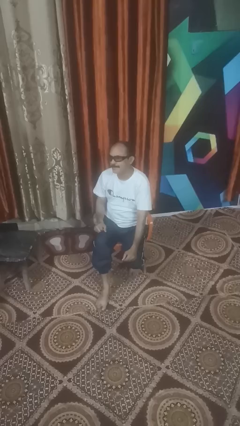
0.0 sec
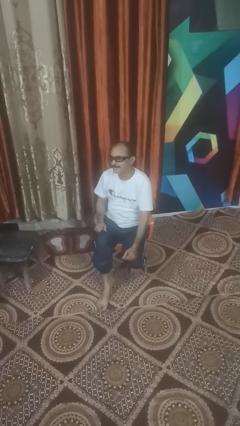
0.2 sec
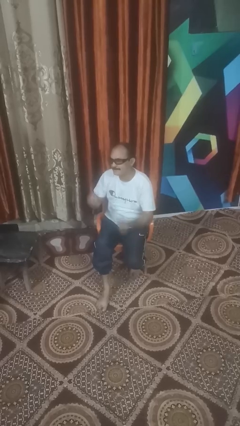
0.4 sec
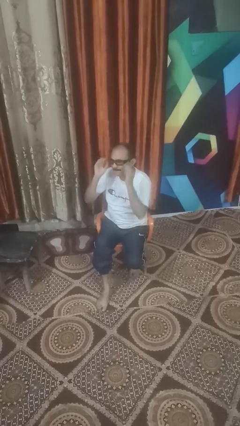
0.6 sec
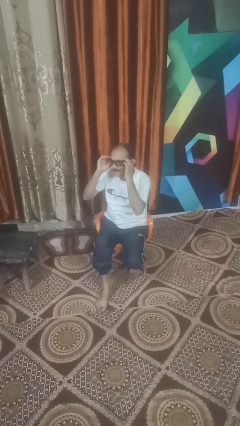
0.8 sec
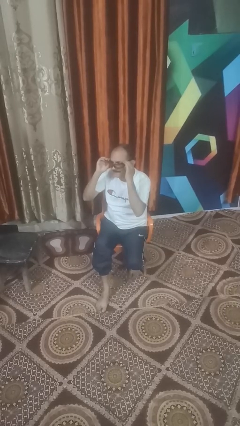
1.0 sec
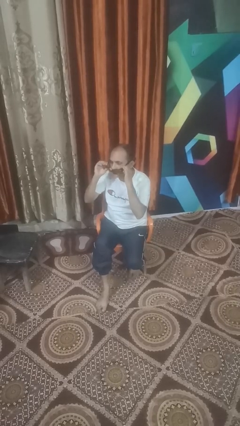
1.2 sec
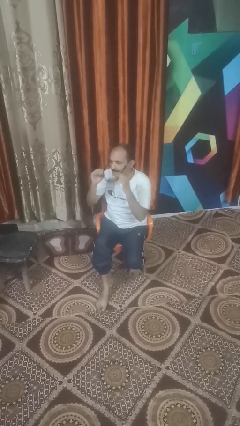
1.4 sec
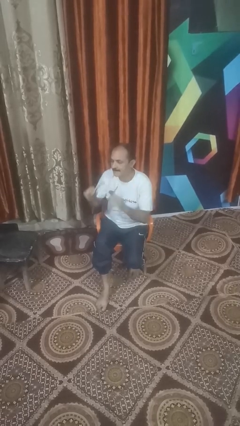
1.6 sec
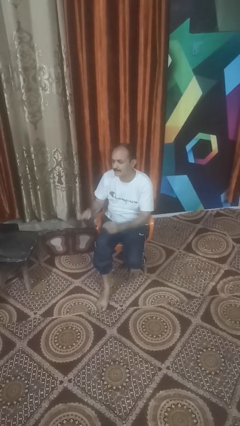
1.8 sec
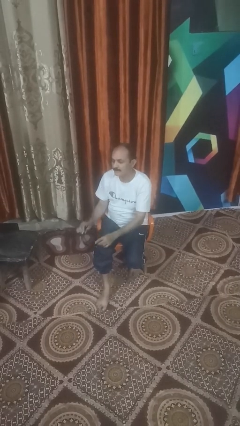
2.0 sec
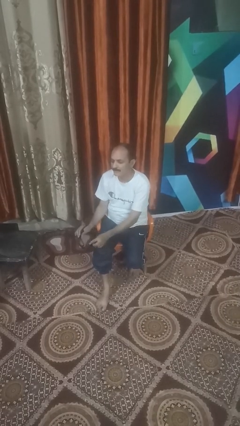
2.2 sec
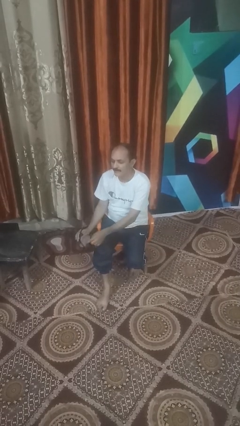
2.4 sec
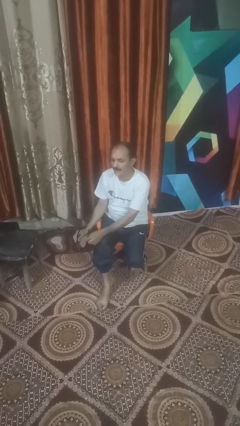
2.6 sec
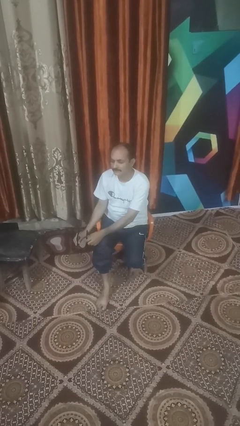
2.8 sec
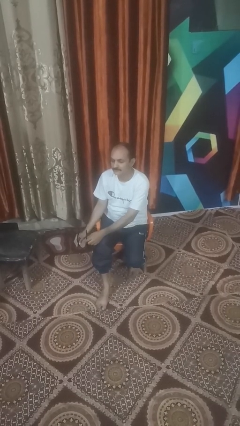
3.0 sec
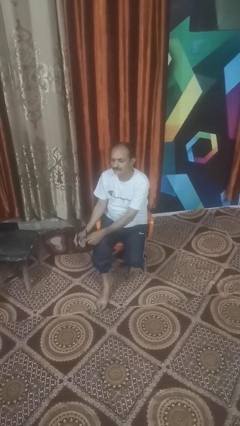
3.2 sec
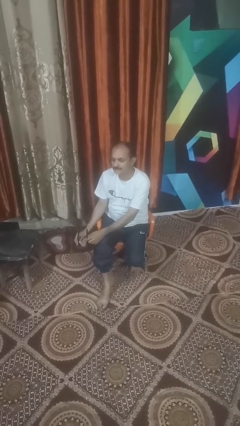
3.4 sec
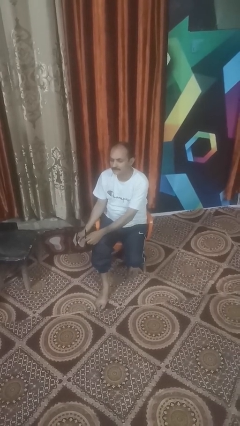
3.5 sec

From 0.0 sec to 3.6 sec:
person takes off sunglasses

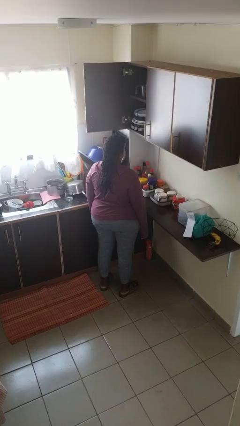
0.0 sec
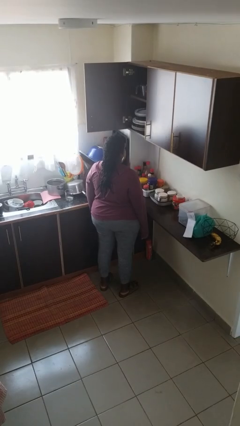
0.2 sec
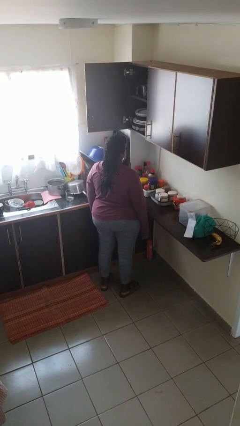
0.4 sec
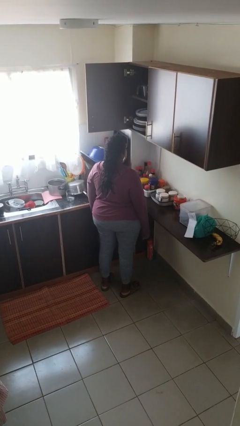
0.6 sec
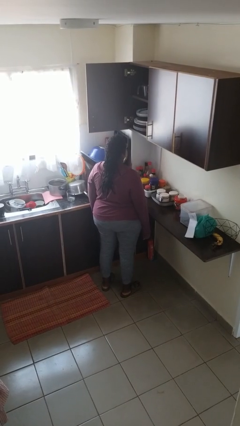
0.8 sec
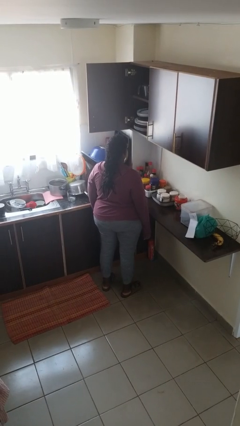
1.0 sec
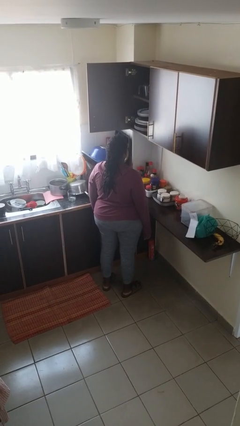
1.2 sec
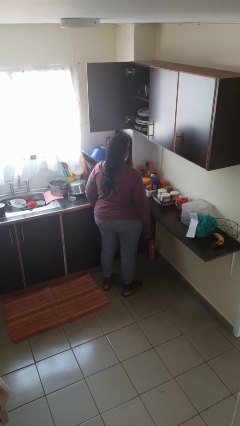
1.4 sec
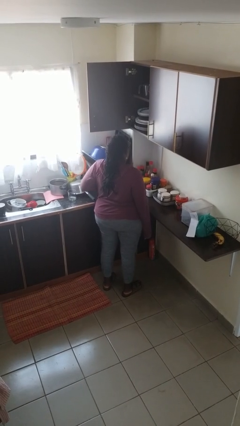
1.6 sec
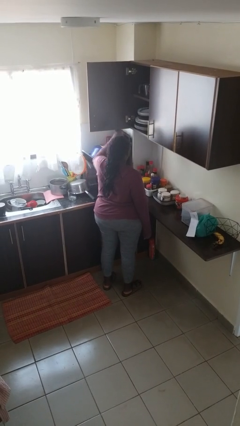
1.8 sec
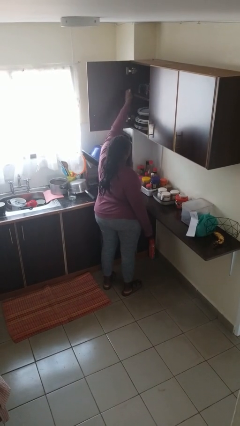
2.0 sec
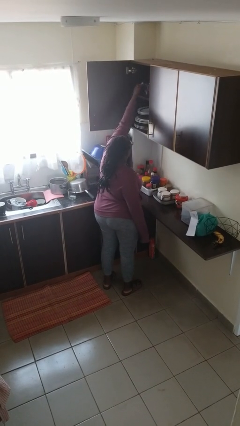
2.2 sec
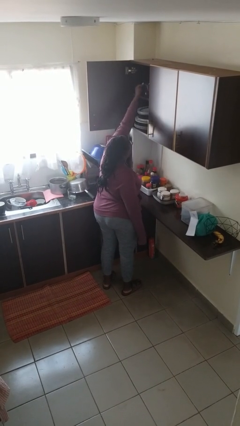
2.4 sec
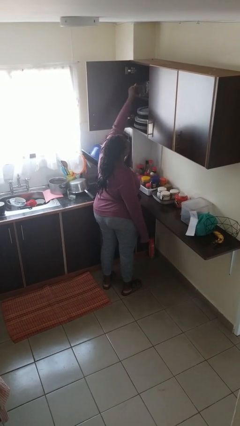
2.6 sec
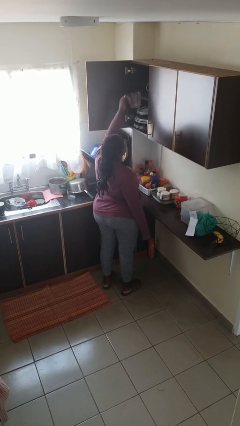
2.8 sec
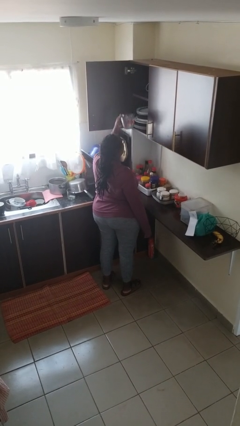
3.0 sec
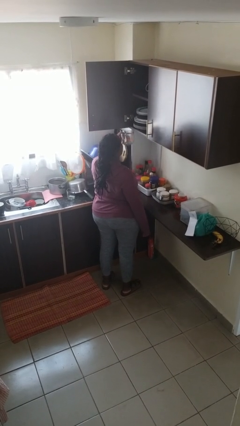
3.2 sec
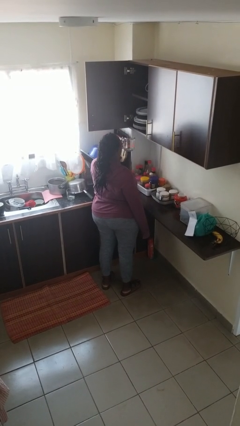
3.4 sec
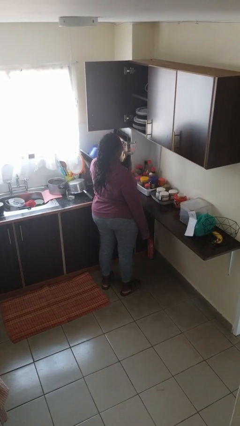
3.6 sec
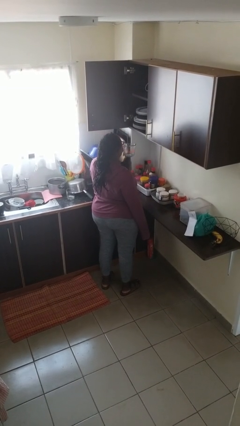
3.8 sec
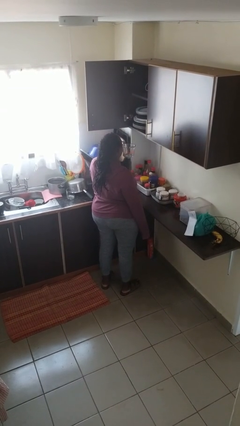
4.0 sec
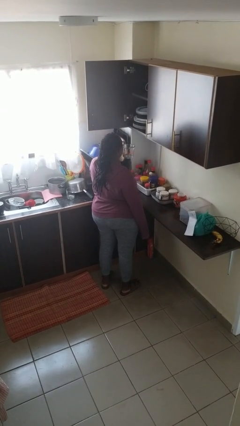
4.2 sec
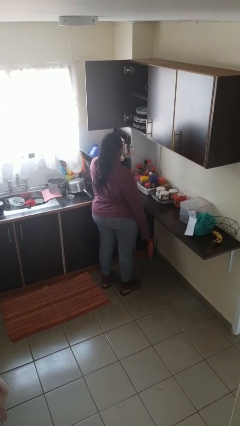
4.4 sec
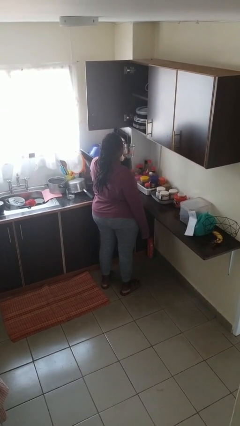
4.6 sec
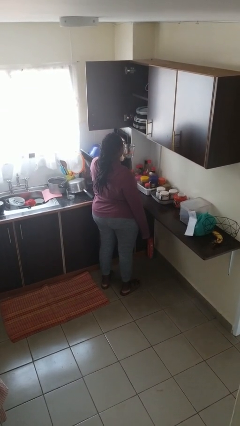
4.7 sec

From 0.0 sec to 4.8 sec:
person picks up object from cabinet

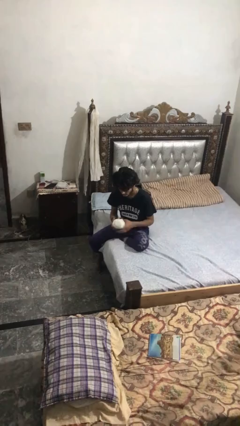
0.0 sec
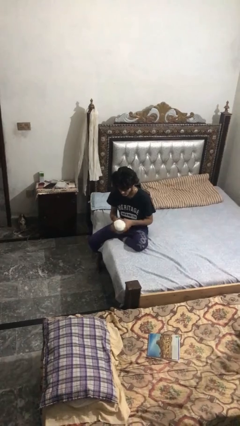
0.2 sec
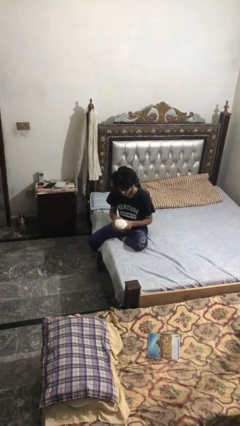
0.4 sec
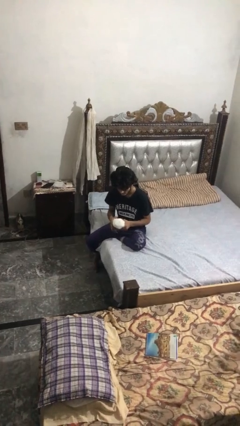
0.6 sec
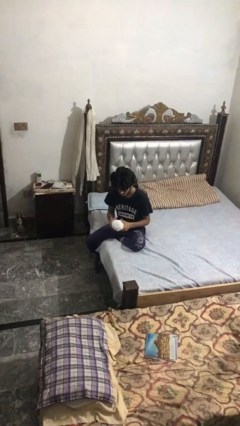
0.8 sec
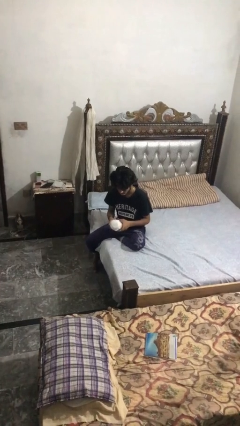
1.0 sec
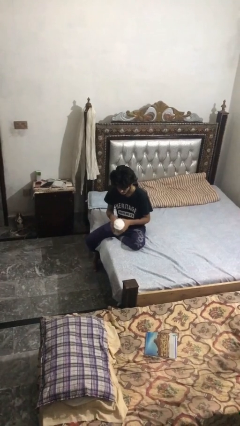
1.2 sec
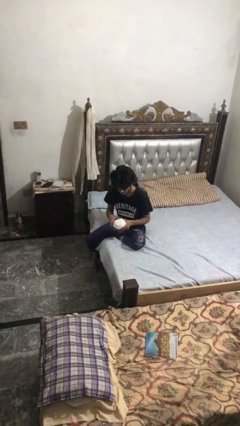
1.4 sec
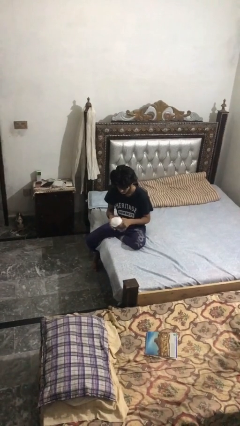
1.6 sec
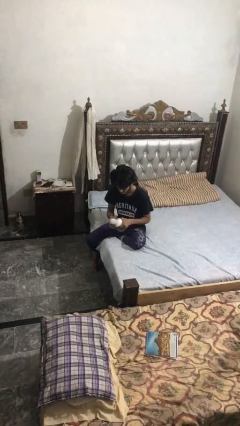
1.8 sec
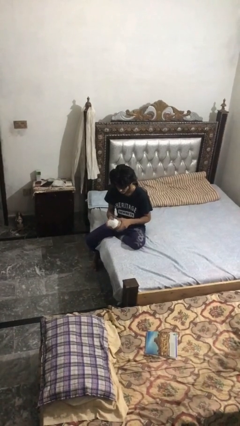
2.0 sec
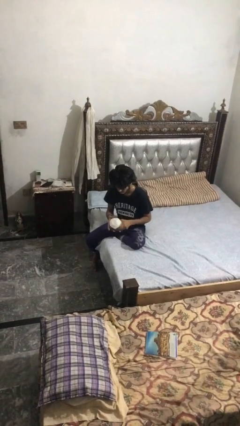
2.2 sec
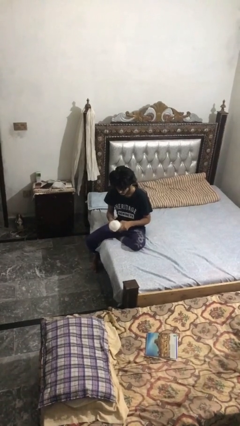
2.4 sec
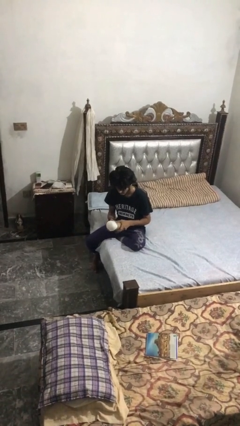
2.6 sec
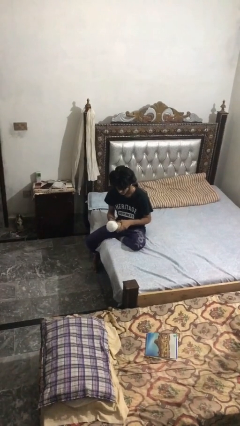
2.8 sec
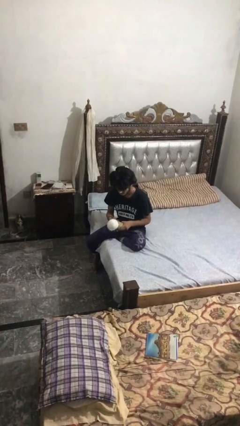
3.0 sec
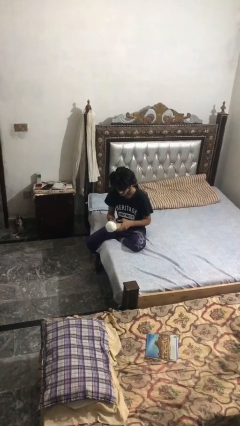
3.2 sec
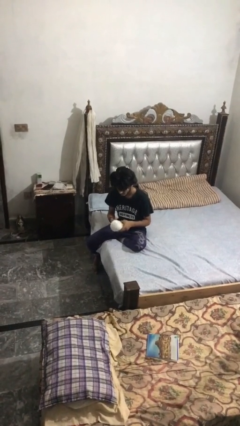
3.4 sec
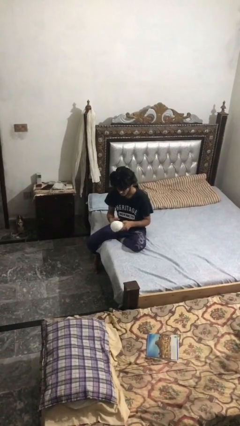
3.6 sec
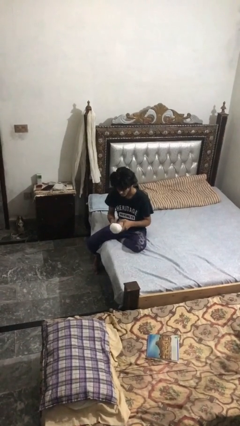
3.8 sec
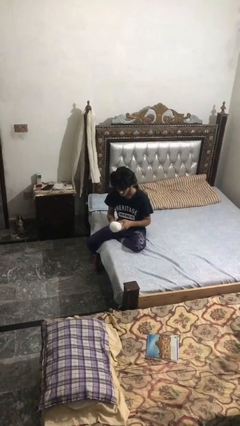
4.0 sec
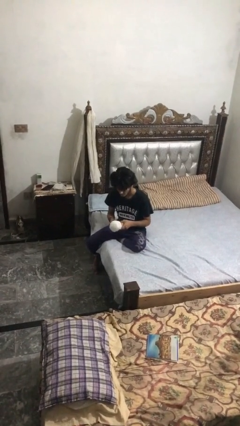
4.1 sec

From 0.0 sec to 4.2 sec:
person squeezes object

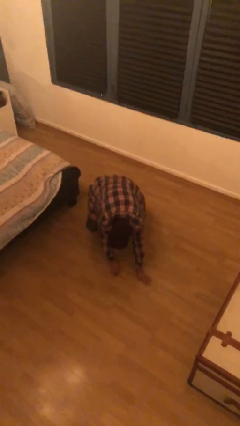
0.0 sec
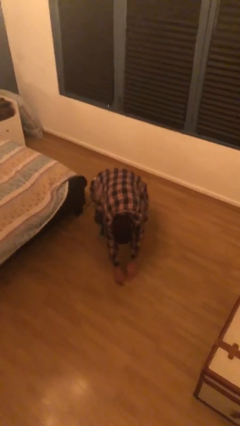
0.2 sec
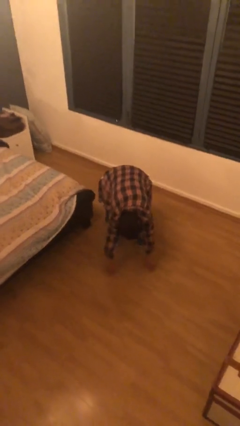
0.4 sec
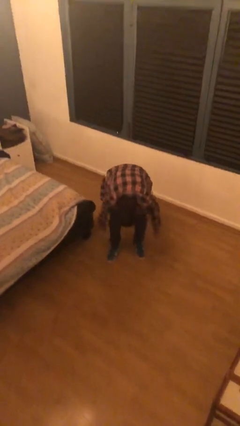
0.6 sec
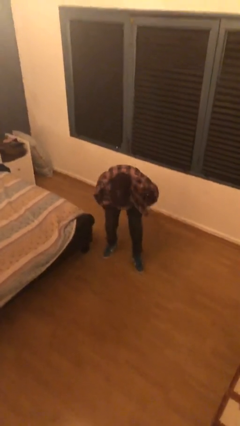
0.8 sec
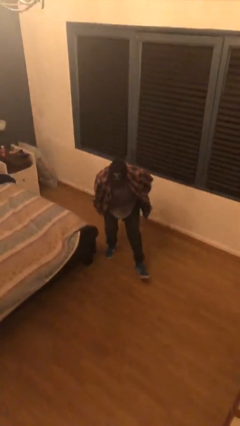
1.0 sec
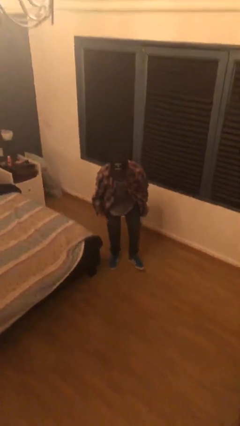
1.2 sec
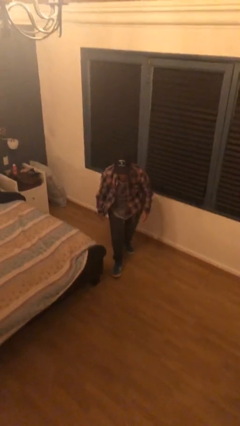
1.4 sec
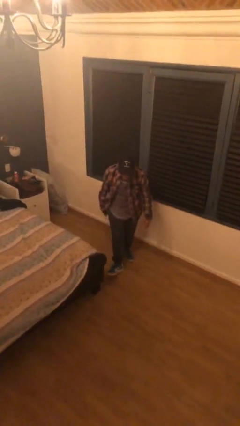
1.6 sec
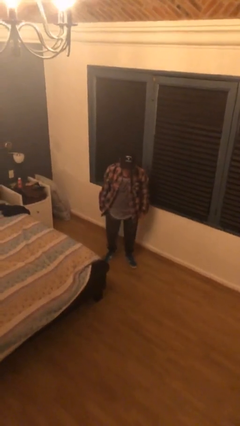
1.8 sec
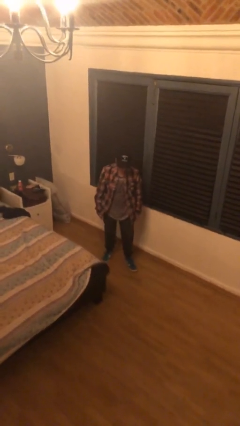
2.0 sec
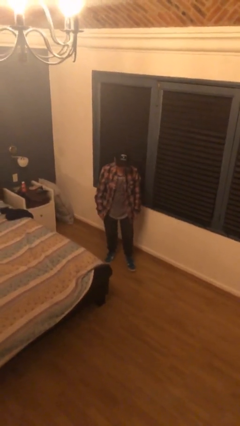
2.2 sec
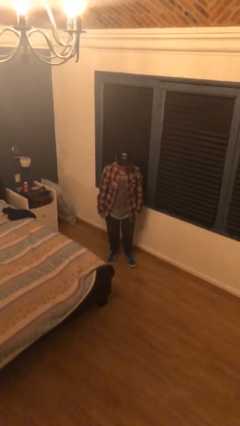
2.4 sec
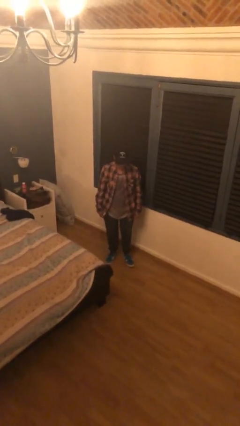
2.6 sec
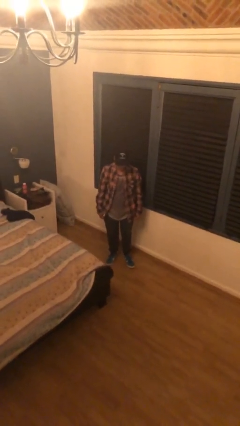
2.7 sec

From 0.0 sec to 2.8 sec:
person stands up from floor

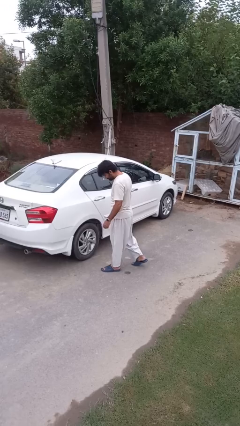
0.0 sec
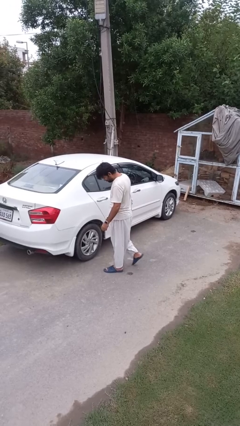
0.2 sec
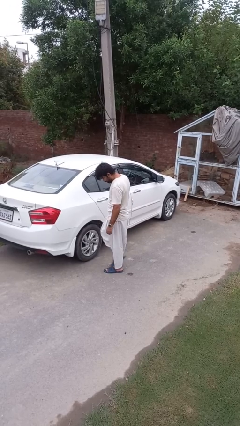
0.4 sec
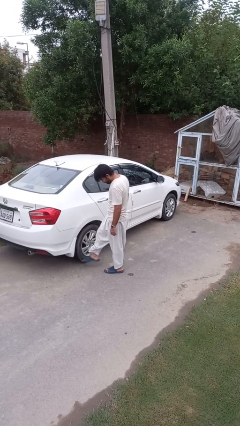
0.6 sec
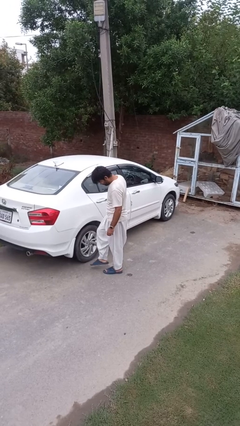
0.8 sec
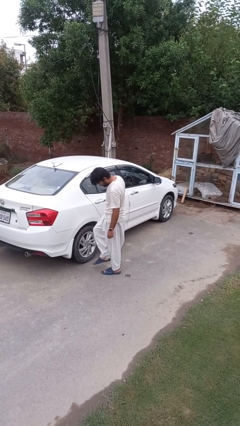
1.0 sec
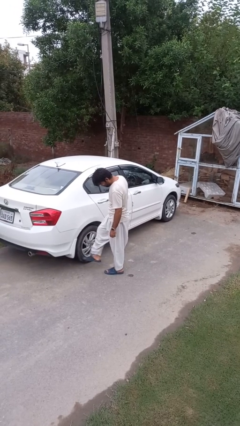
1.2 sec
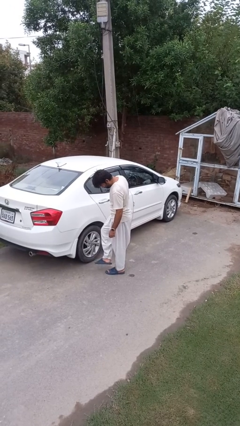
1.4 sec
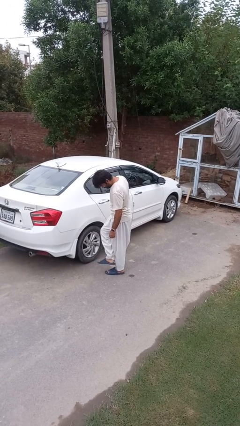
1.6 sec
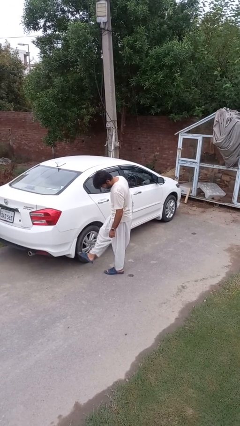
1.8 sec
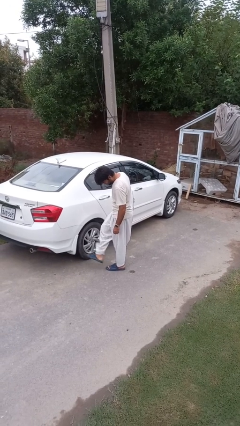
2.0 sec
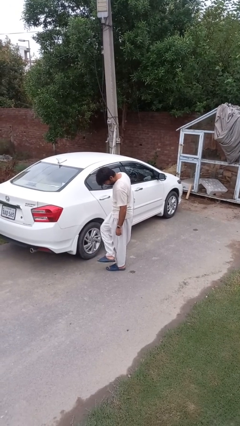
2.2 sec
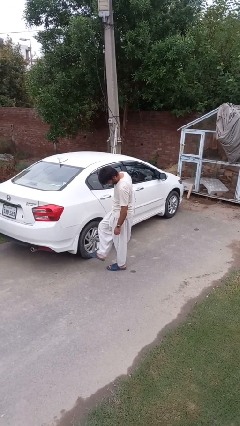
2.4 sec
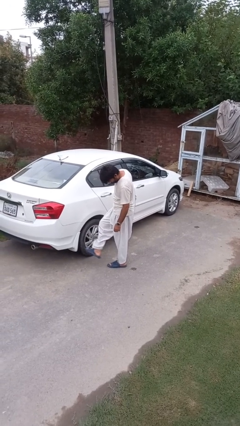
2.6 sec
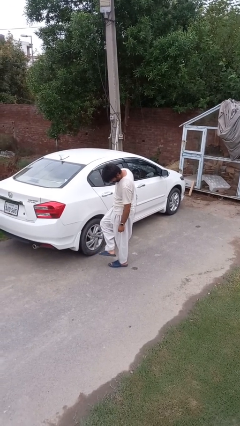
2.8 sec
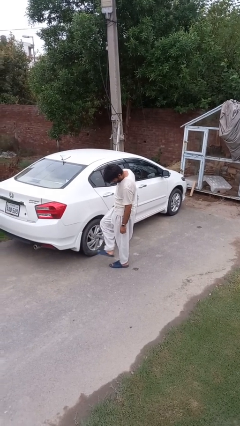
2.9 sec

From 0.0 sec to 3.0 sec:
person kicks car tires
